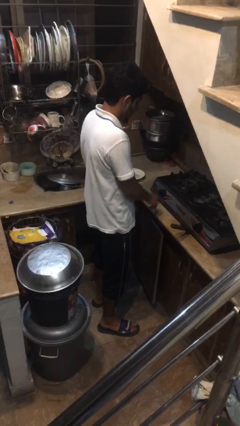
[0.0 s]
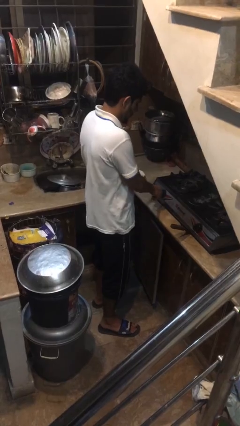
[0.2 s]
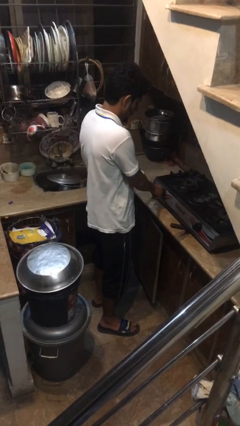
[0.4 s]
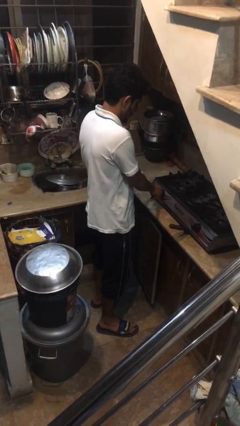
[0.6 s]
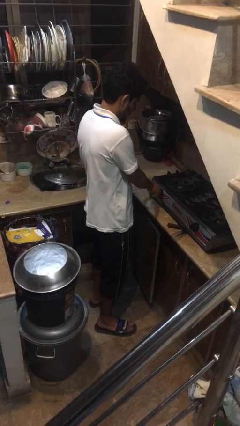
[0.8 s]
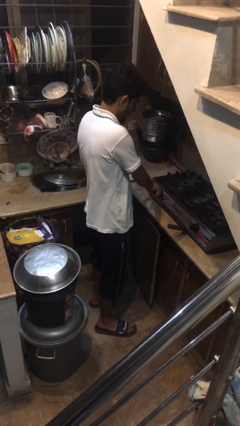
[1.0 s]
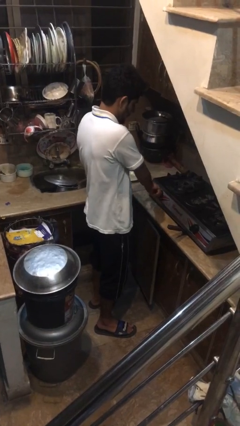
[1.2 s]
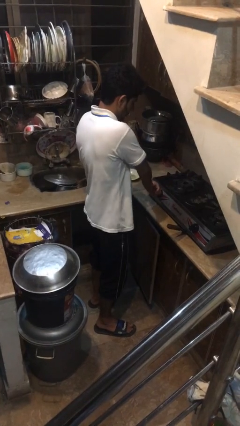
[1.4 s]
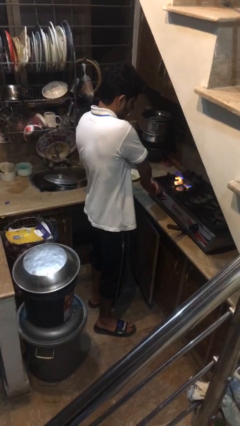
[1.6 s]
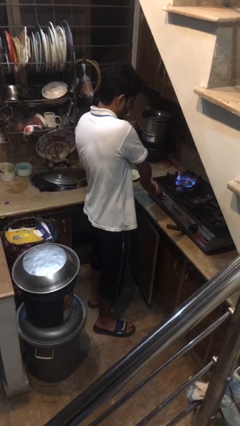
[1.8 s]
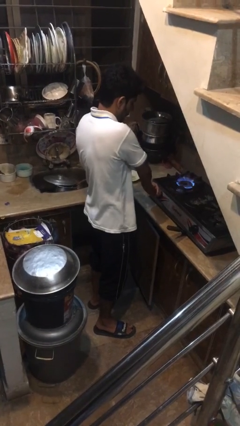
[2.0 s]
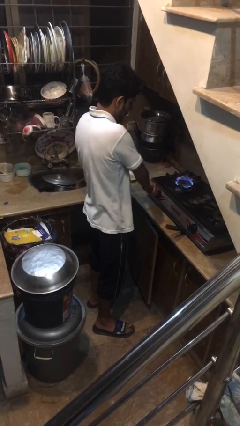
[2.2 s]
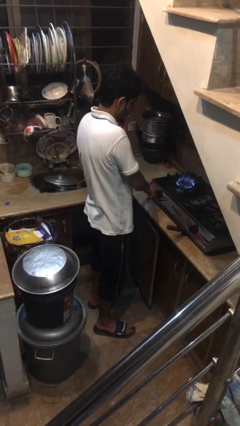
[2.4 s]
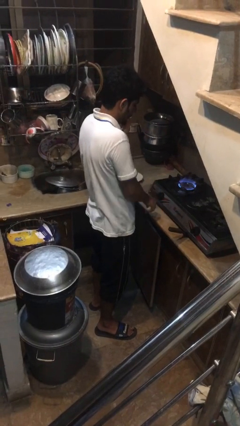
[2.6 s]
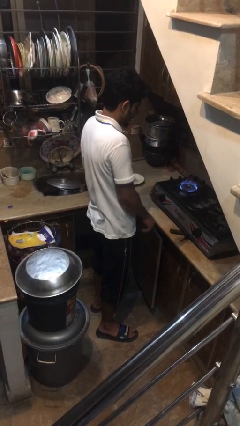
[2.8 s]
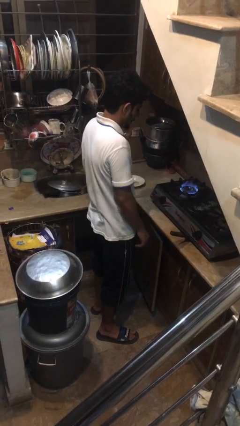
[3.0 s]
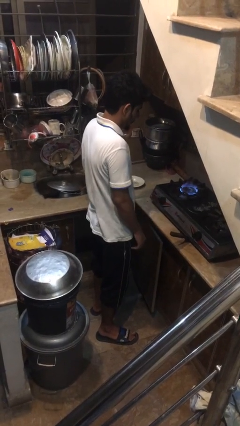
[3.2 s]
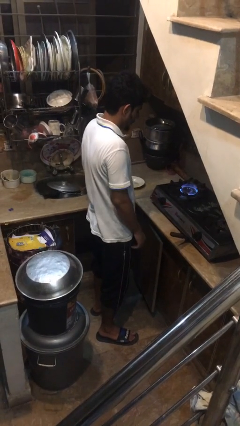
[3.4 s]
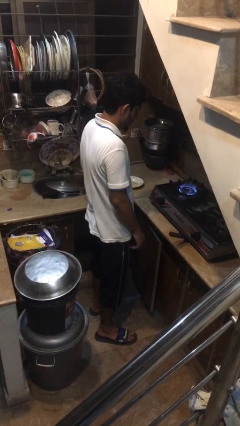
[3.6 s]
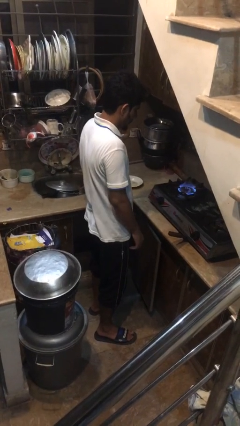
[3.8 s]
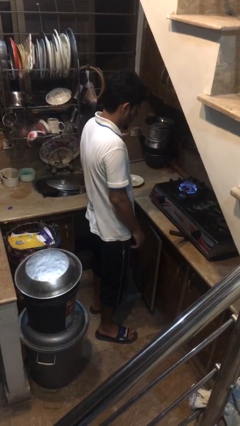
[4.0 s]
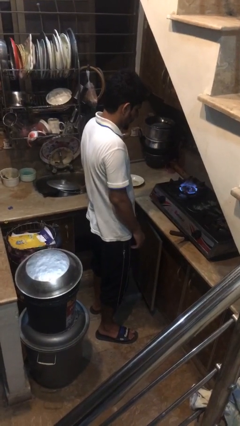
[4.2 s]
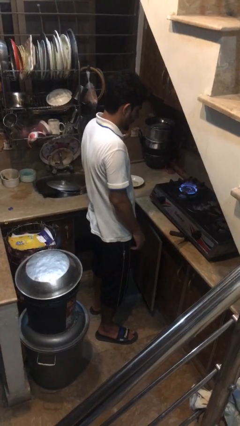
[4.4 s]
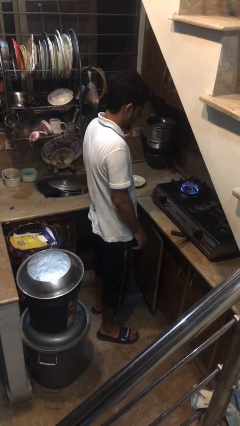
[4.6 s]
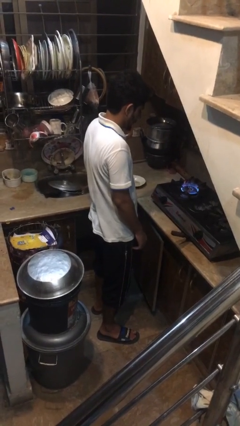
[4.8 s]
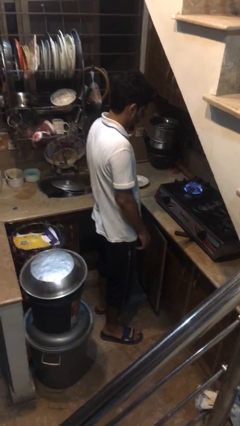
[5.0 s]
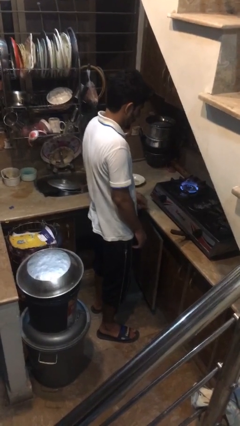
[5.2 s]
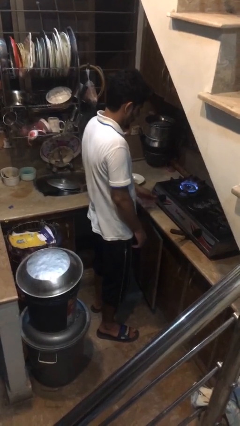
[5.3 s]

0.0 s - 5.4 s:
person turns on stovetop

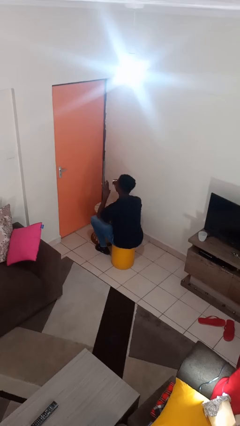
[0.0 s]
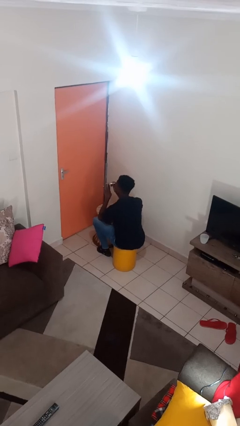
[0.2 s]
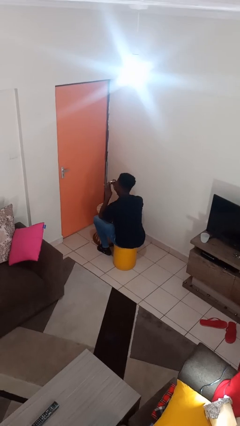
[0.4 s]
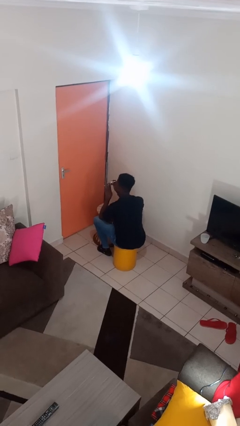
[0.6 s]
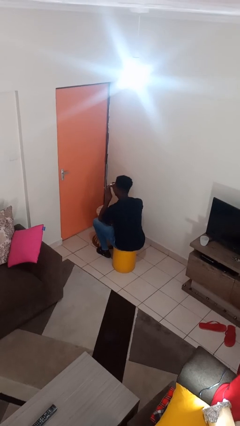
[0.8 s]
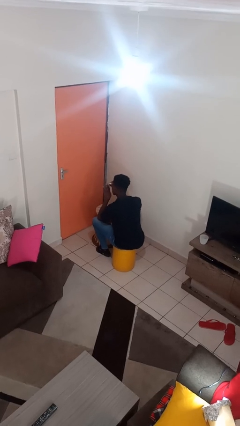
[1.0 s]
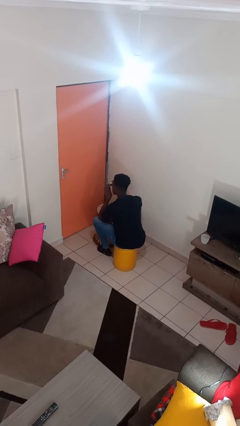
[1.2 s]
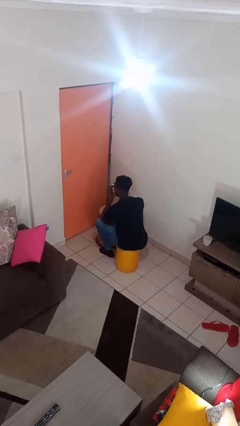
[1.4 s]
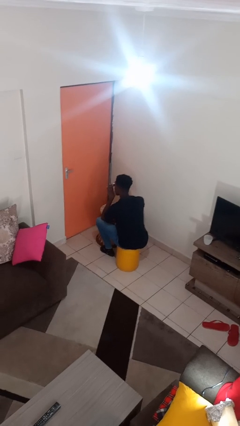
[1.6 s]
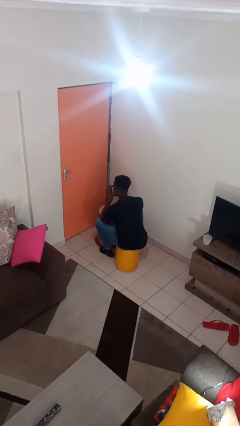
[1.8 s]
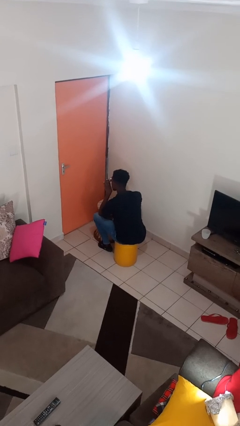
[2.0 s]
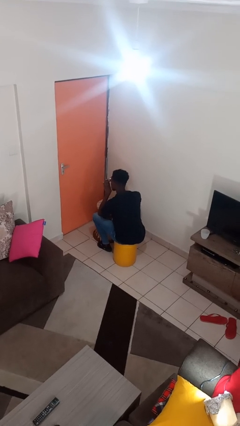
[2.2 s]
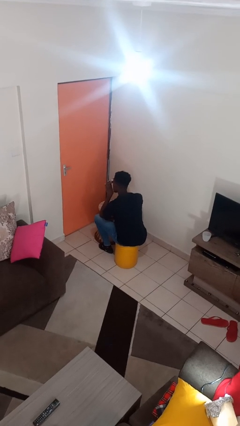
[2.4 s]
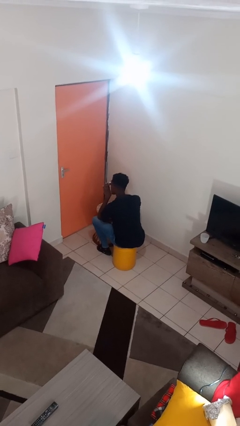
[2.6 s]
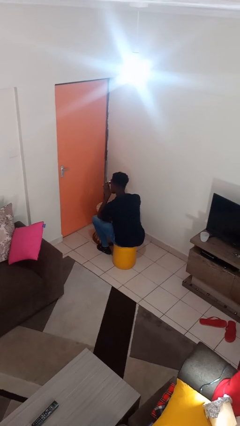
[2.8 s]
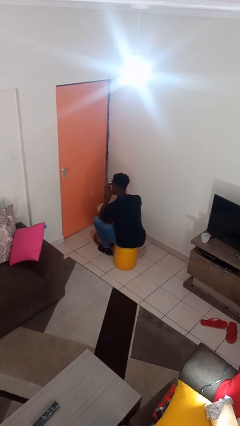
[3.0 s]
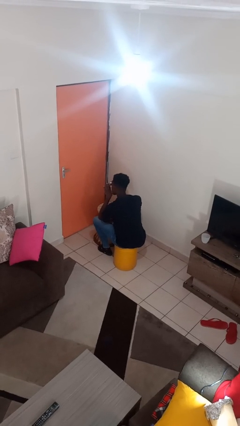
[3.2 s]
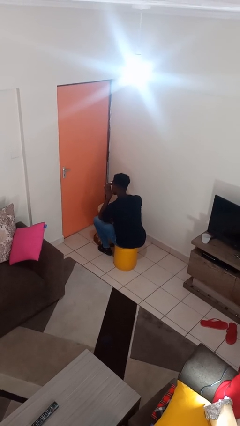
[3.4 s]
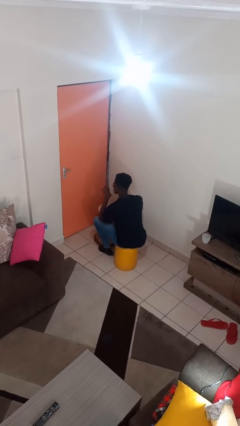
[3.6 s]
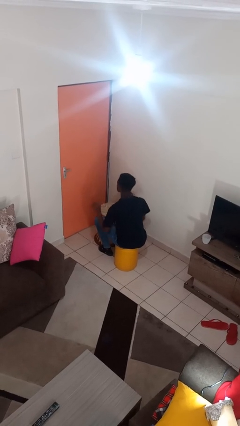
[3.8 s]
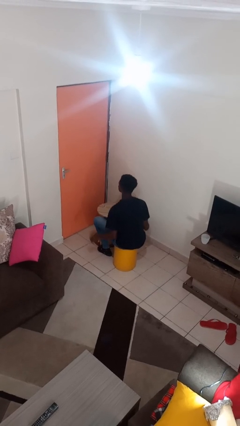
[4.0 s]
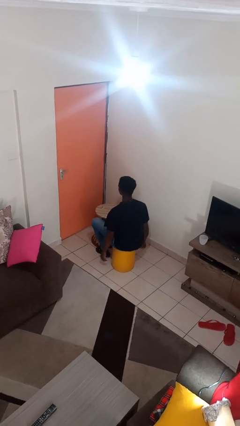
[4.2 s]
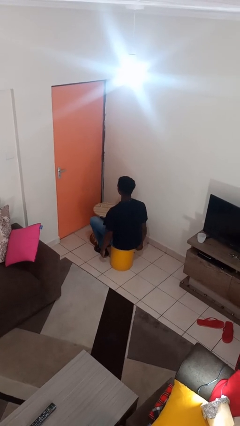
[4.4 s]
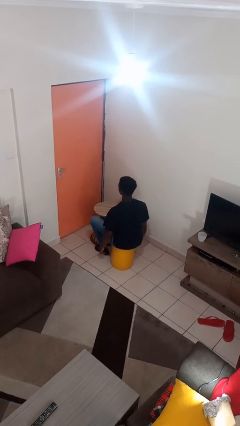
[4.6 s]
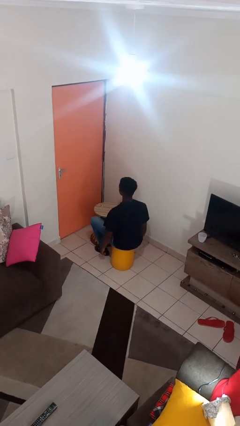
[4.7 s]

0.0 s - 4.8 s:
person paints fingernails

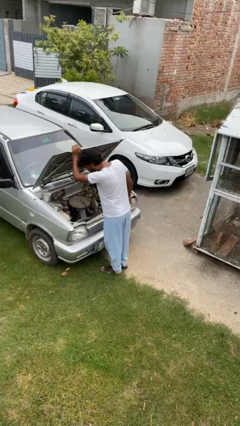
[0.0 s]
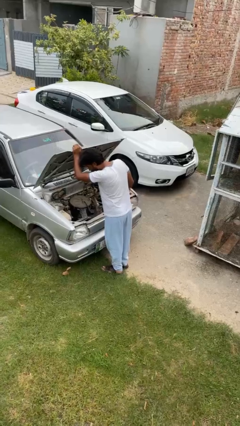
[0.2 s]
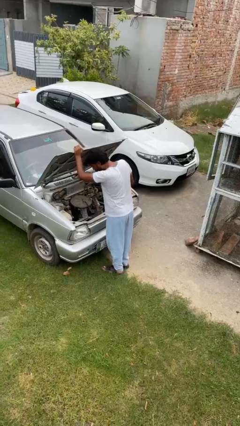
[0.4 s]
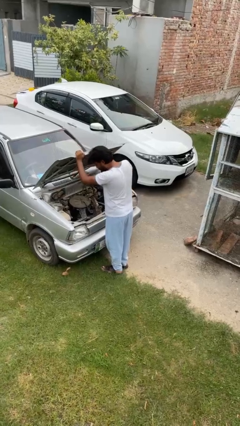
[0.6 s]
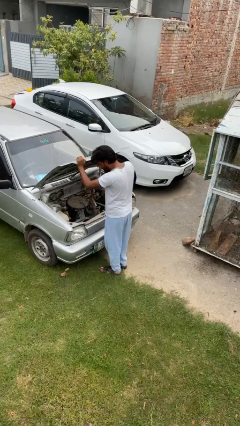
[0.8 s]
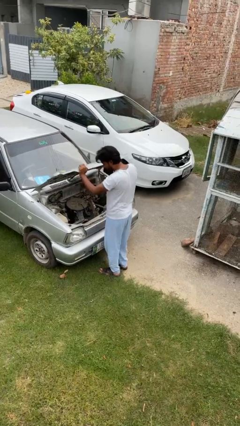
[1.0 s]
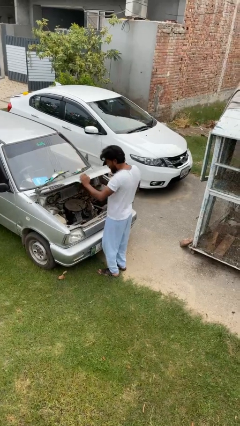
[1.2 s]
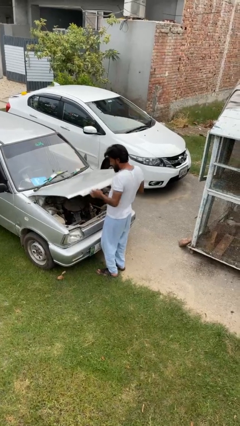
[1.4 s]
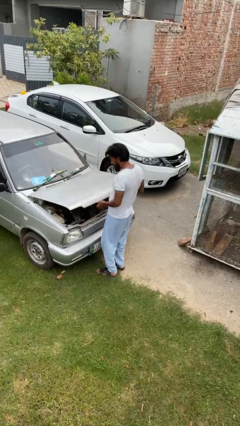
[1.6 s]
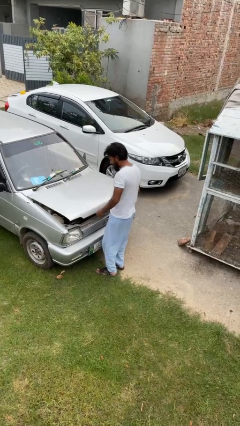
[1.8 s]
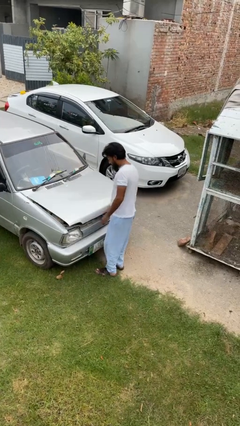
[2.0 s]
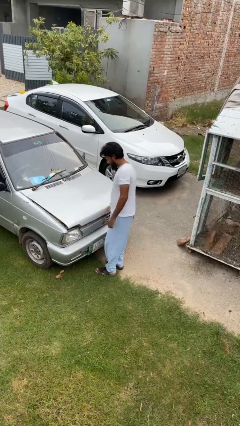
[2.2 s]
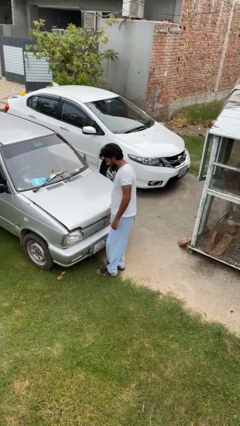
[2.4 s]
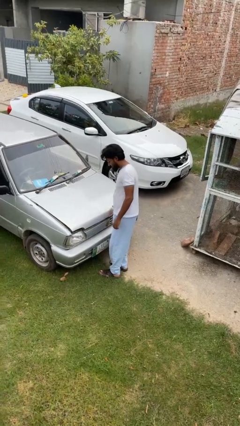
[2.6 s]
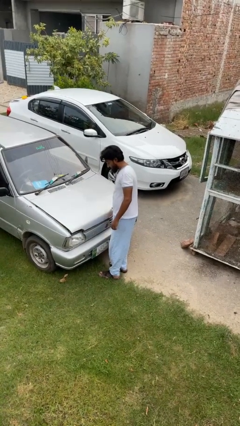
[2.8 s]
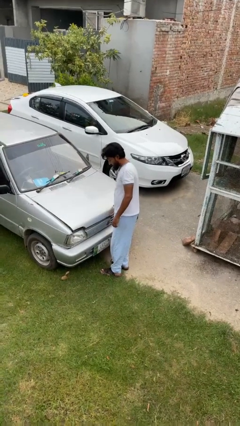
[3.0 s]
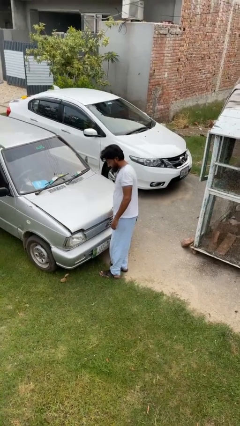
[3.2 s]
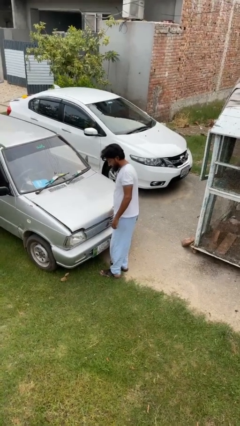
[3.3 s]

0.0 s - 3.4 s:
person closes car hood

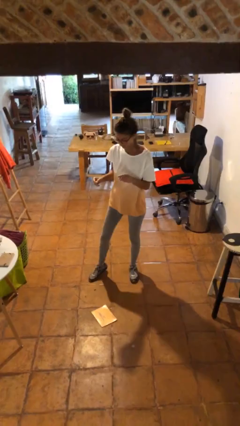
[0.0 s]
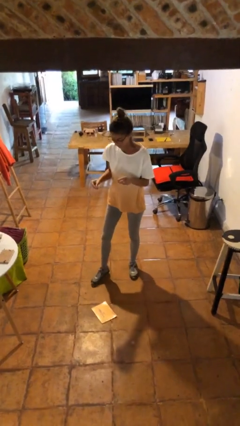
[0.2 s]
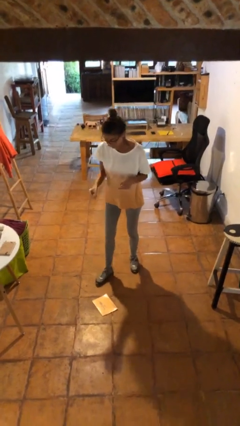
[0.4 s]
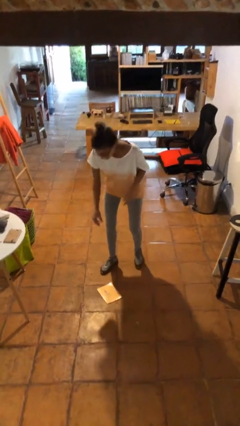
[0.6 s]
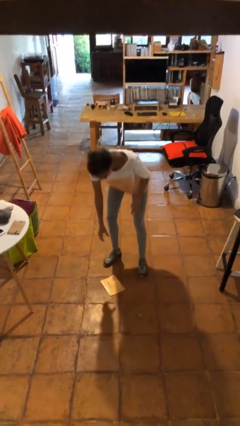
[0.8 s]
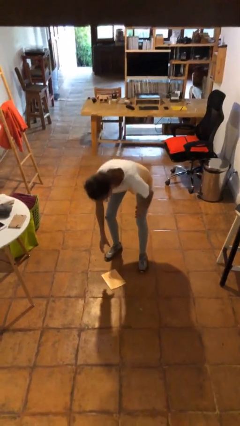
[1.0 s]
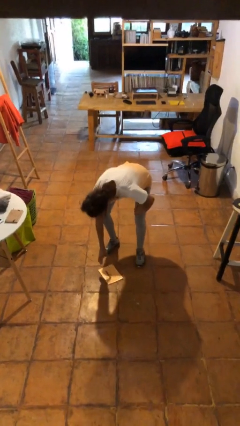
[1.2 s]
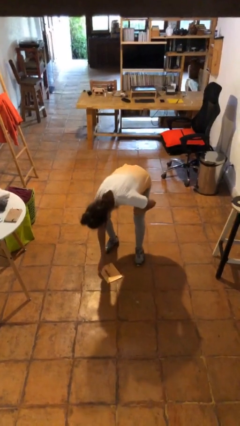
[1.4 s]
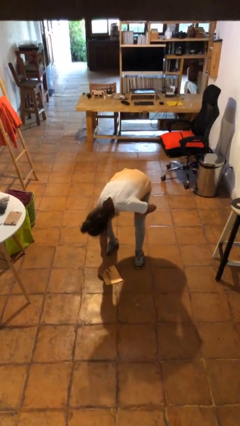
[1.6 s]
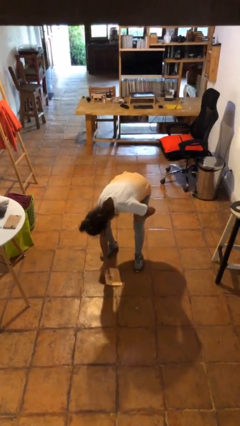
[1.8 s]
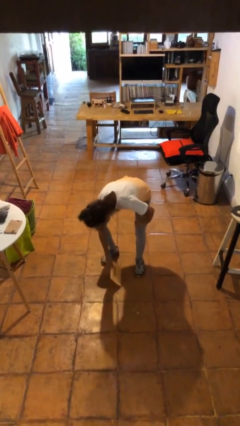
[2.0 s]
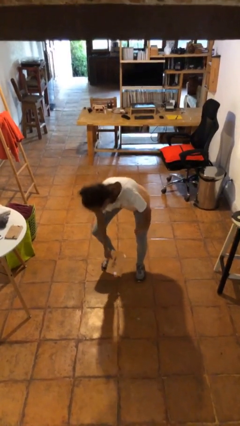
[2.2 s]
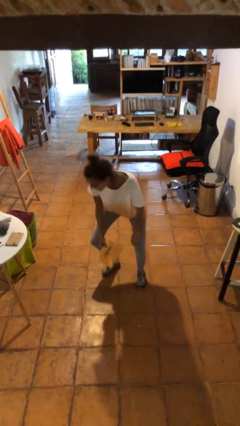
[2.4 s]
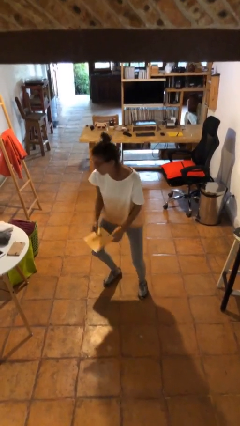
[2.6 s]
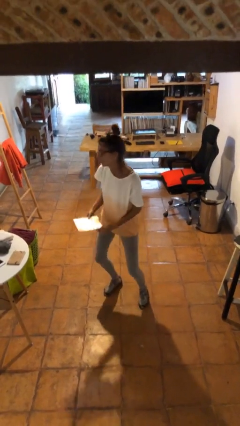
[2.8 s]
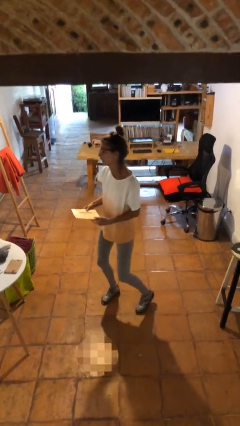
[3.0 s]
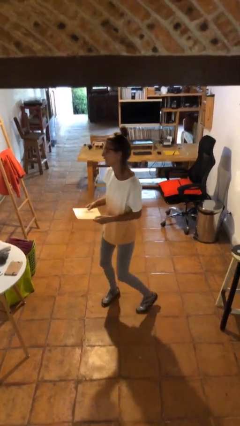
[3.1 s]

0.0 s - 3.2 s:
person picks up object from floor

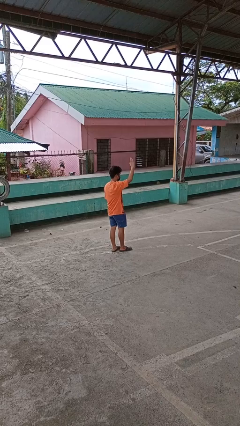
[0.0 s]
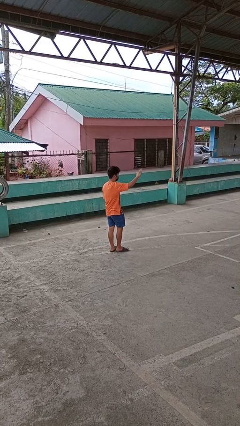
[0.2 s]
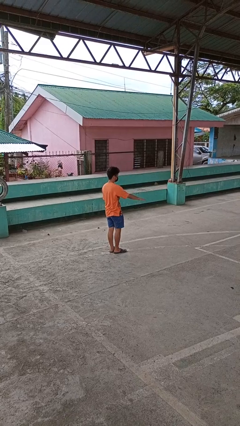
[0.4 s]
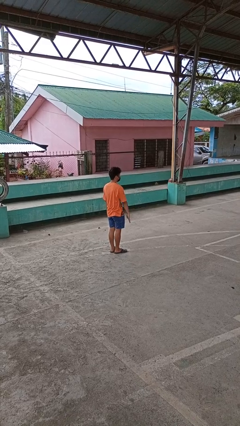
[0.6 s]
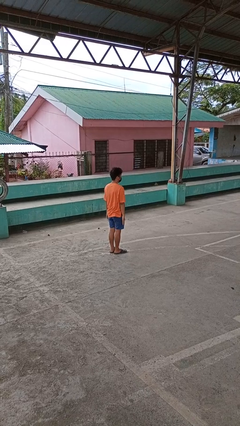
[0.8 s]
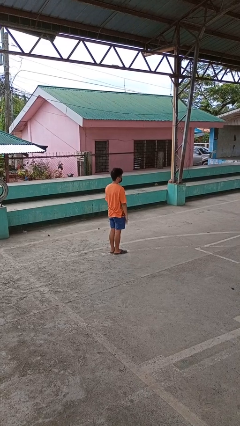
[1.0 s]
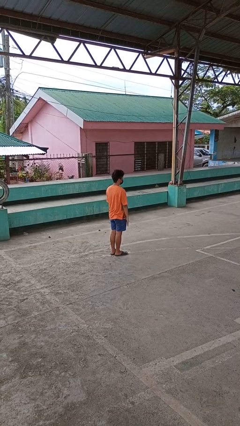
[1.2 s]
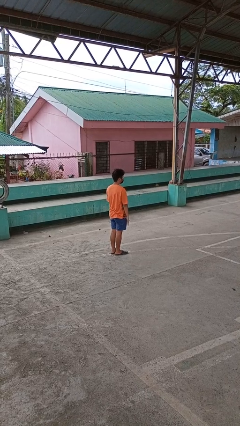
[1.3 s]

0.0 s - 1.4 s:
person gestures lower hand
